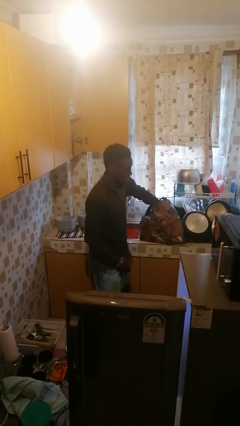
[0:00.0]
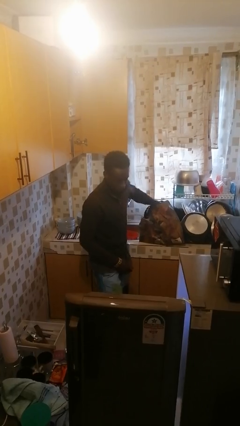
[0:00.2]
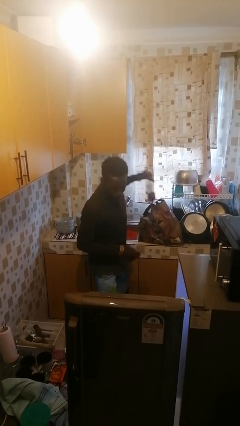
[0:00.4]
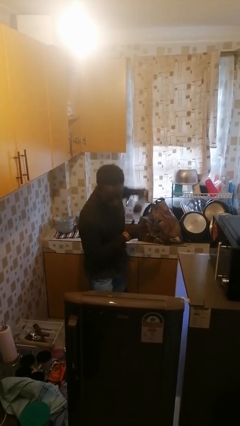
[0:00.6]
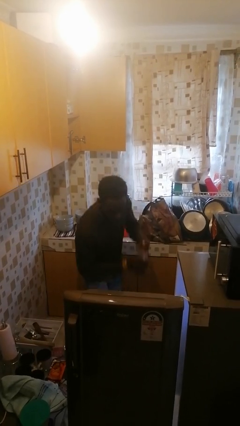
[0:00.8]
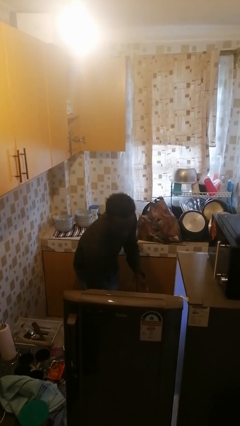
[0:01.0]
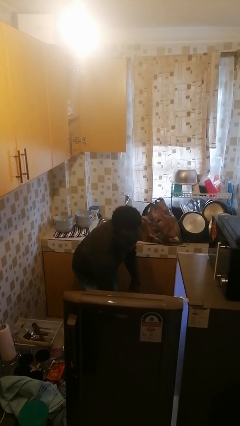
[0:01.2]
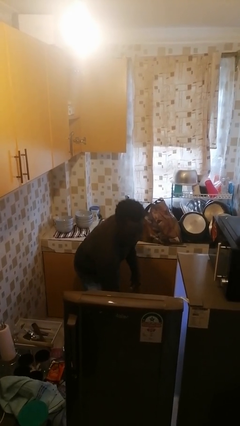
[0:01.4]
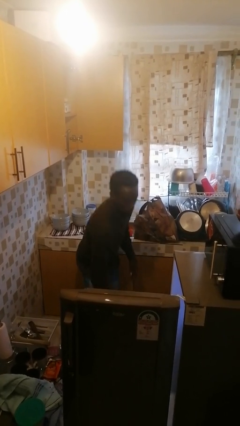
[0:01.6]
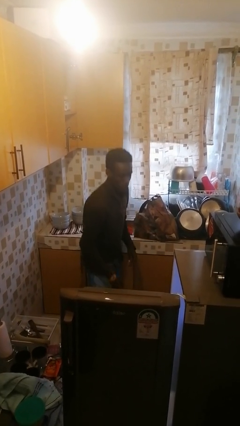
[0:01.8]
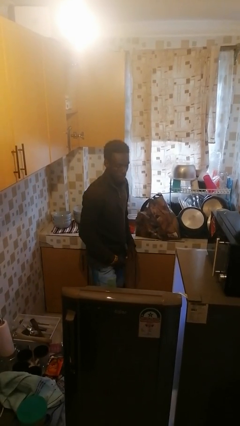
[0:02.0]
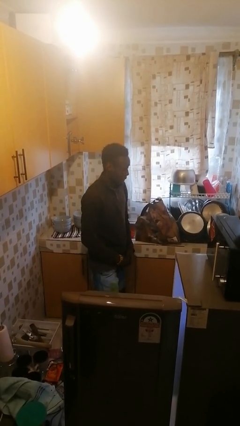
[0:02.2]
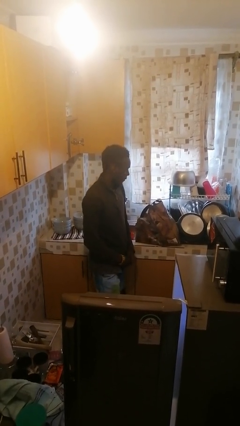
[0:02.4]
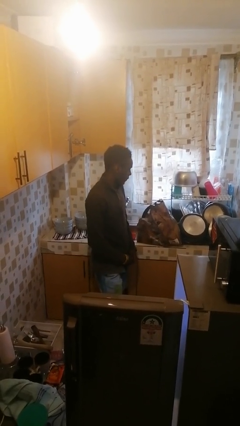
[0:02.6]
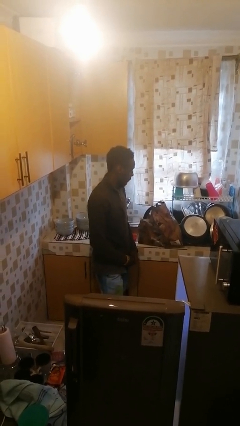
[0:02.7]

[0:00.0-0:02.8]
person loads groceries into refrigerator

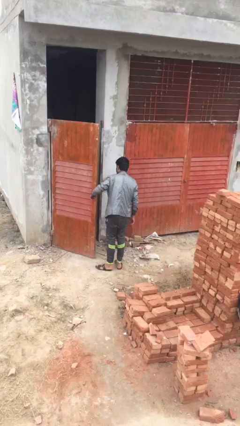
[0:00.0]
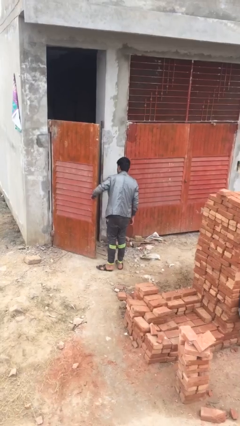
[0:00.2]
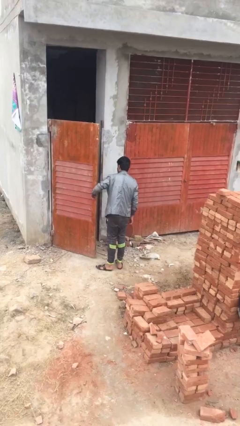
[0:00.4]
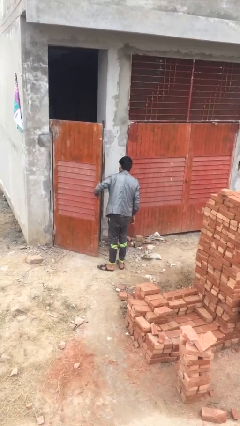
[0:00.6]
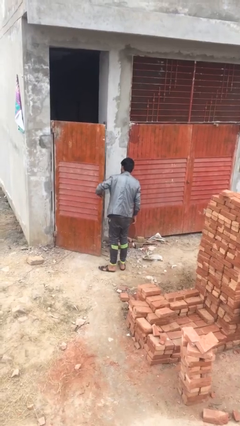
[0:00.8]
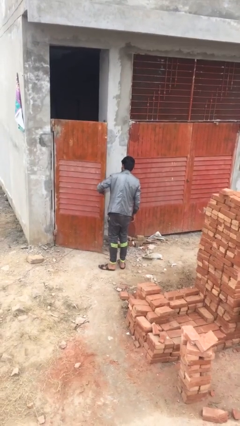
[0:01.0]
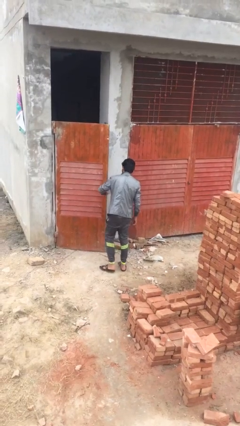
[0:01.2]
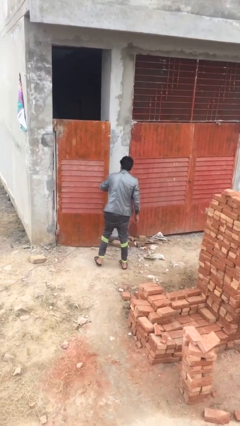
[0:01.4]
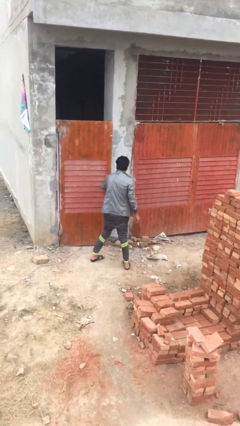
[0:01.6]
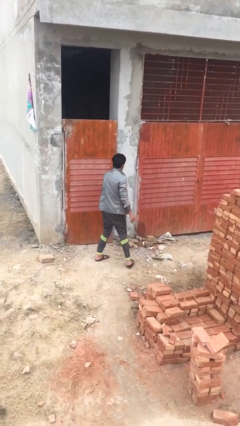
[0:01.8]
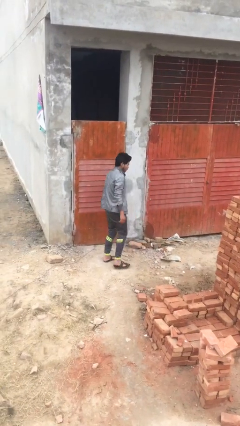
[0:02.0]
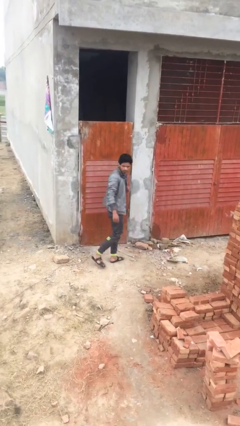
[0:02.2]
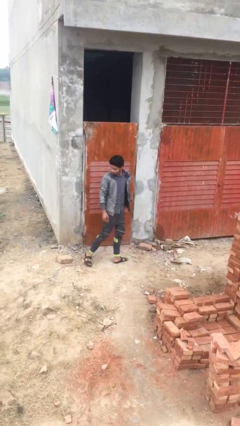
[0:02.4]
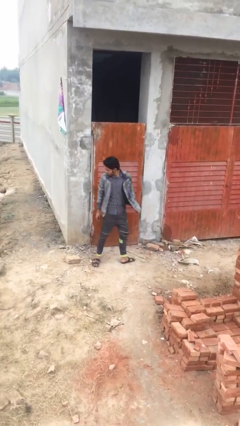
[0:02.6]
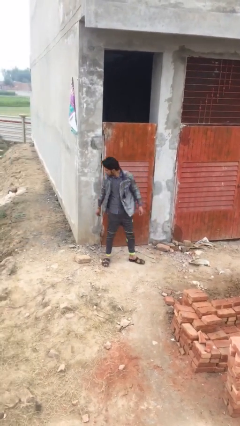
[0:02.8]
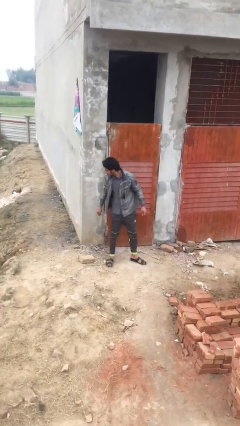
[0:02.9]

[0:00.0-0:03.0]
person closes facility door

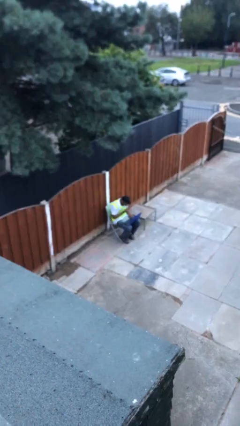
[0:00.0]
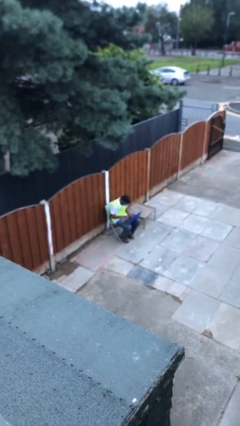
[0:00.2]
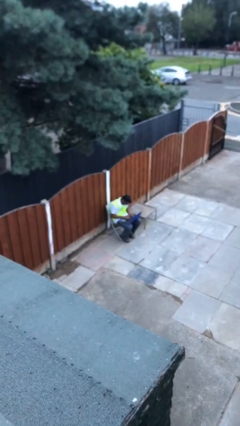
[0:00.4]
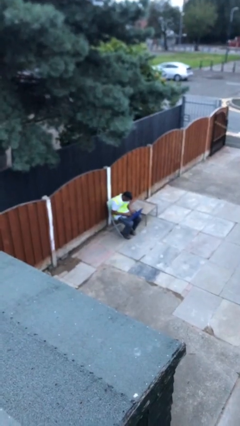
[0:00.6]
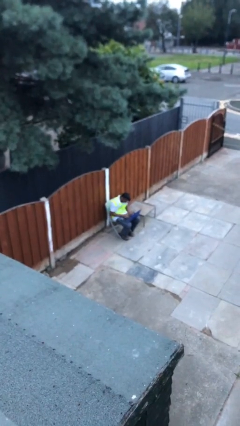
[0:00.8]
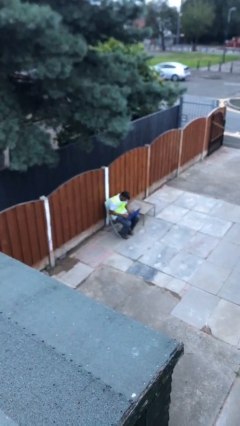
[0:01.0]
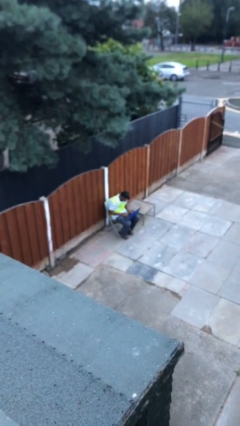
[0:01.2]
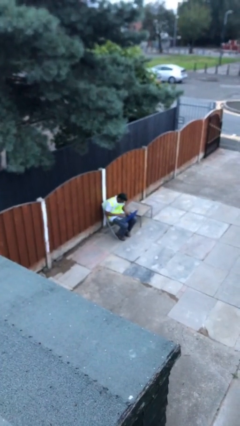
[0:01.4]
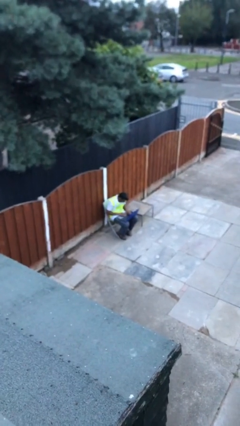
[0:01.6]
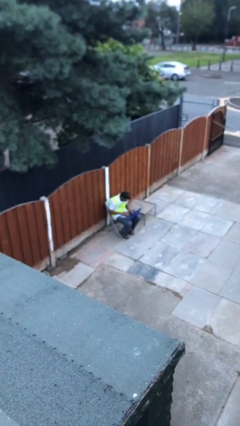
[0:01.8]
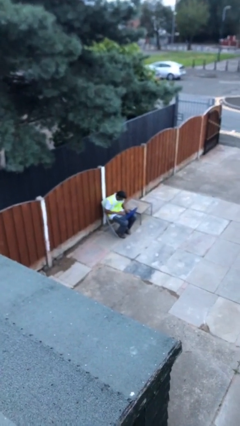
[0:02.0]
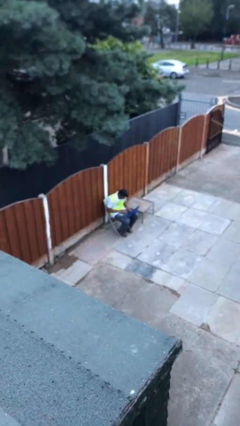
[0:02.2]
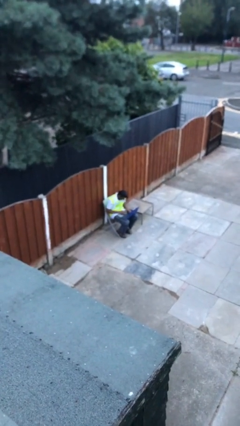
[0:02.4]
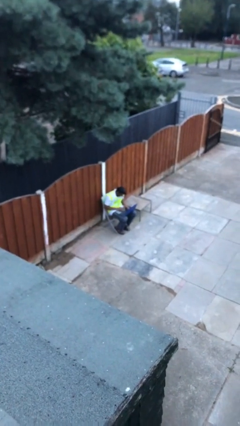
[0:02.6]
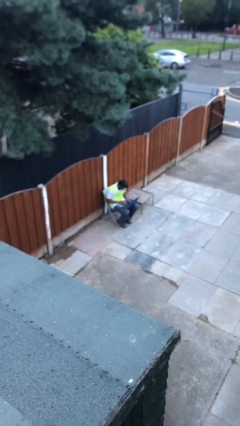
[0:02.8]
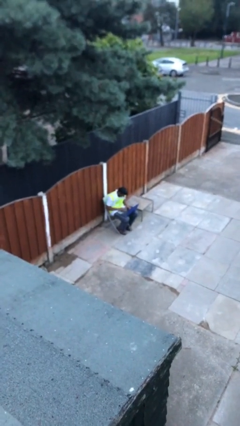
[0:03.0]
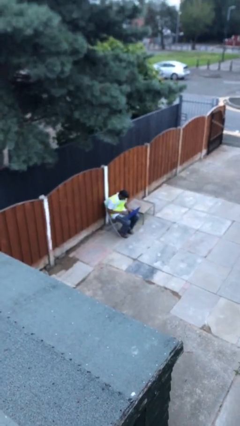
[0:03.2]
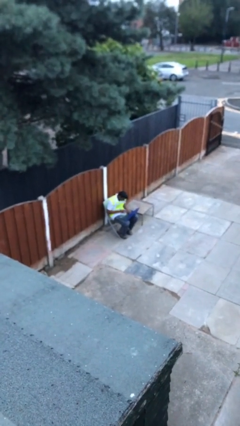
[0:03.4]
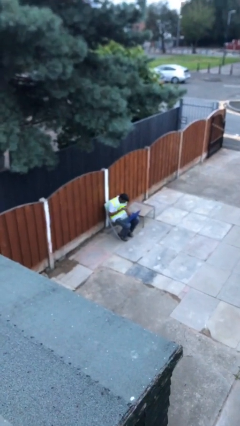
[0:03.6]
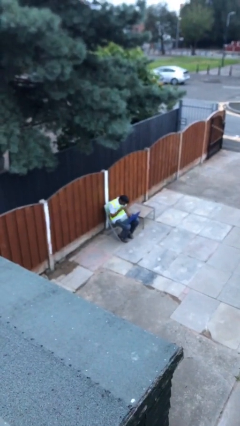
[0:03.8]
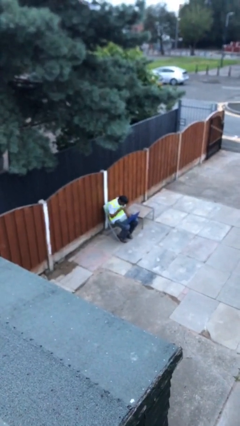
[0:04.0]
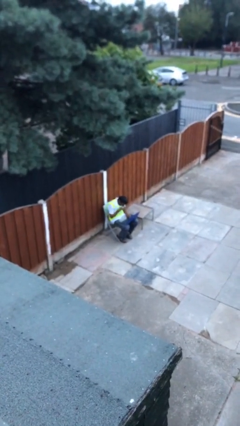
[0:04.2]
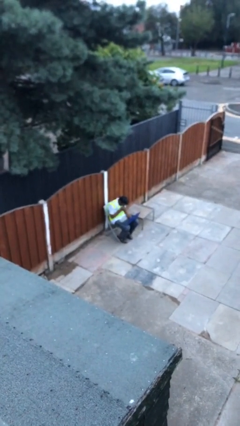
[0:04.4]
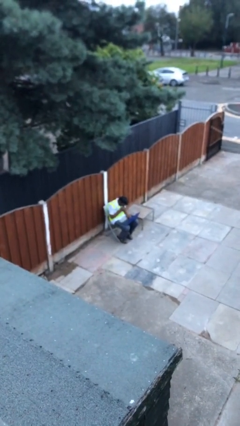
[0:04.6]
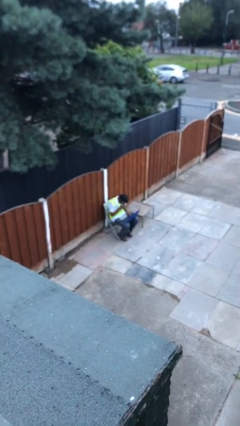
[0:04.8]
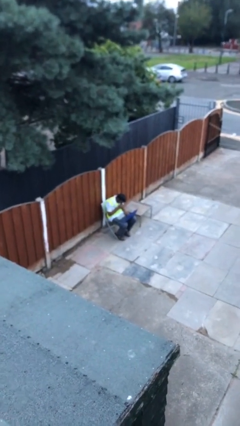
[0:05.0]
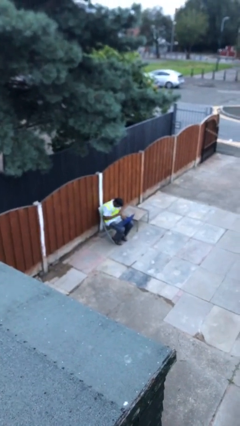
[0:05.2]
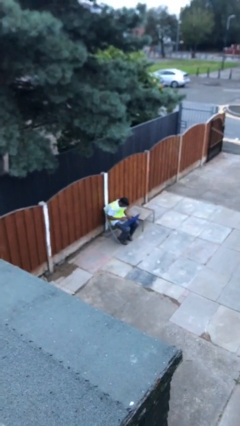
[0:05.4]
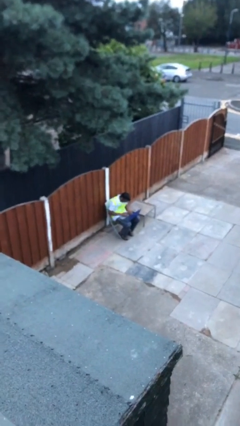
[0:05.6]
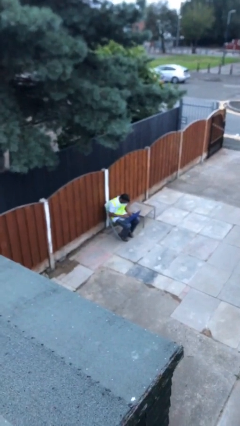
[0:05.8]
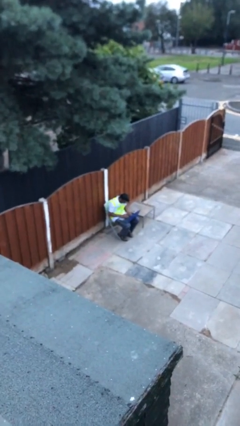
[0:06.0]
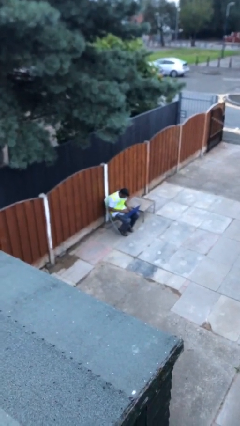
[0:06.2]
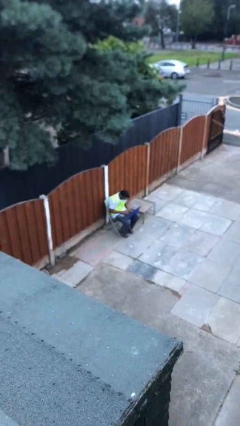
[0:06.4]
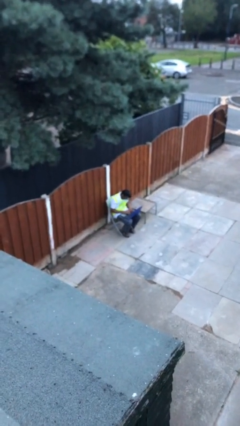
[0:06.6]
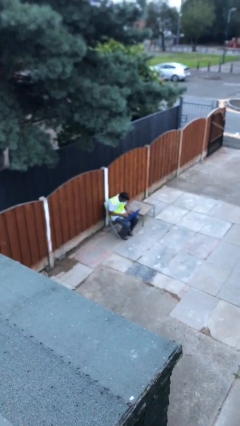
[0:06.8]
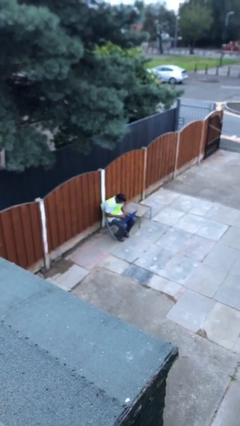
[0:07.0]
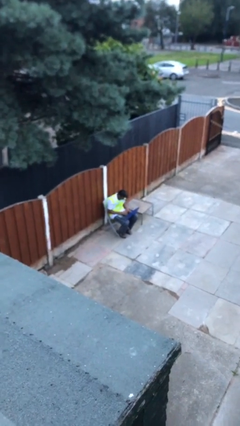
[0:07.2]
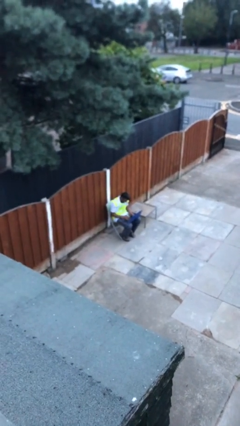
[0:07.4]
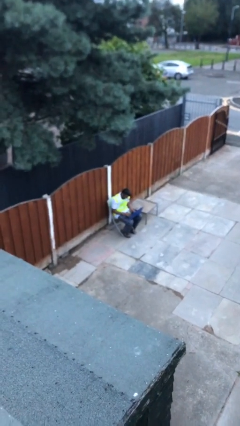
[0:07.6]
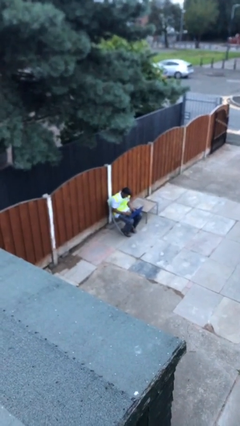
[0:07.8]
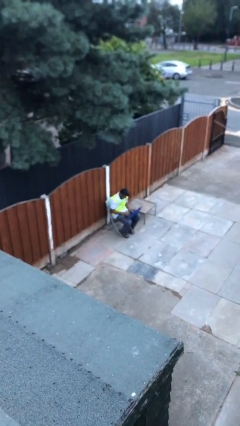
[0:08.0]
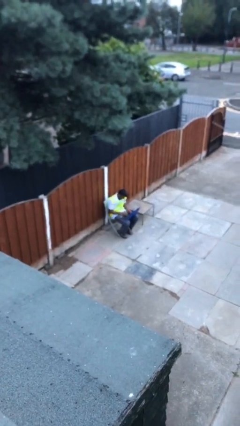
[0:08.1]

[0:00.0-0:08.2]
person interacts with laptop

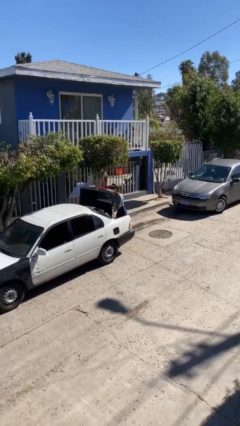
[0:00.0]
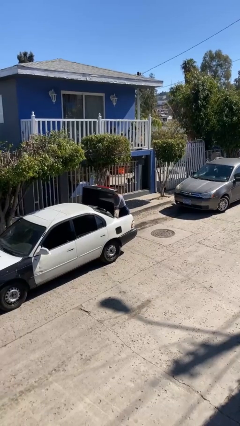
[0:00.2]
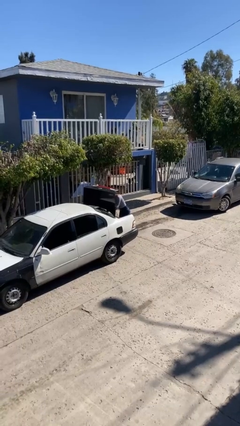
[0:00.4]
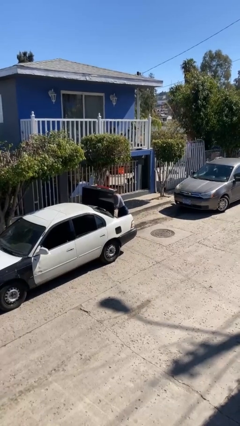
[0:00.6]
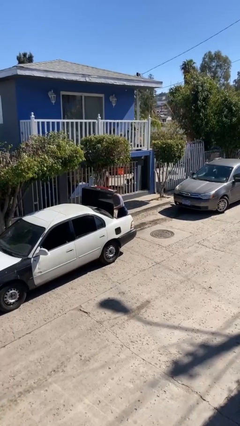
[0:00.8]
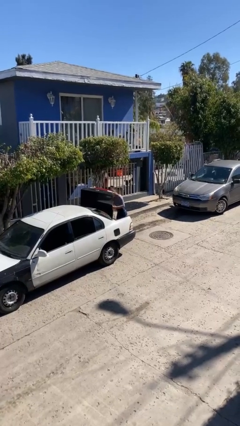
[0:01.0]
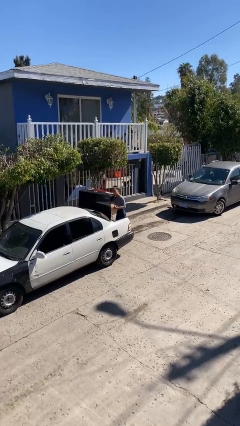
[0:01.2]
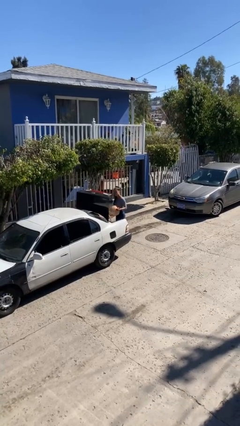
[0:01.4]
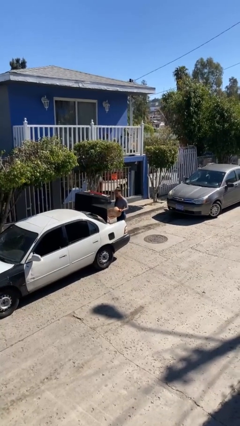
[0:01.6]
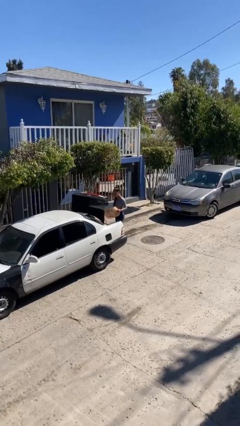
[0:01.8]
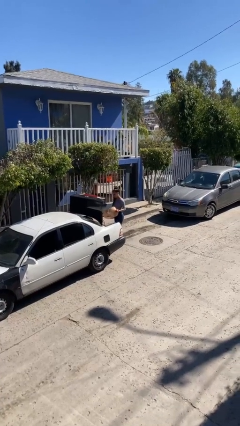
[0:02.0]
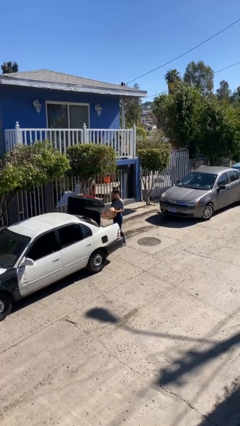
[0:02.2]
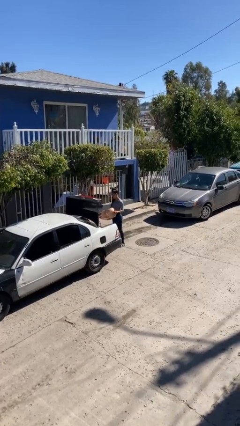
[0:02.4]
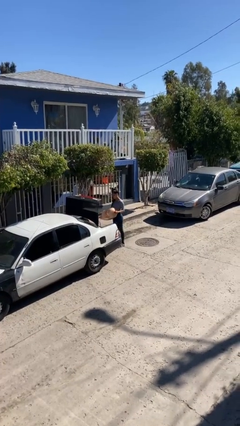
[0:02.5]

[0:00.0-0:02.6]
person unloads car

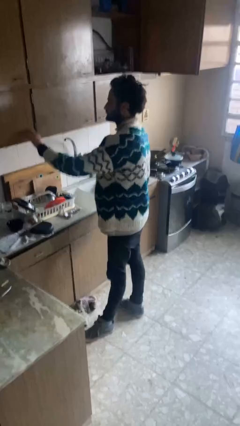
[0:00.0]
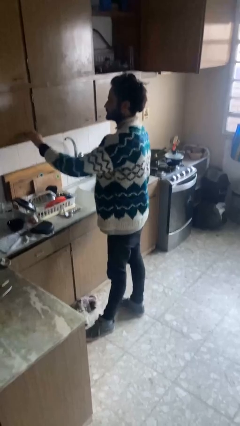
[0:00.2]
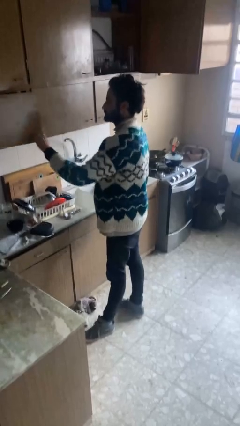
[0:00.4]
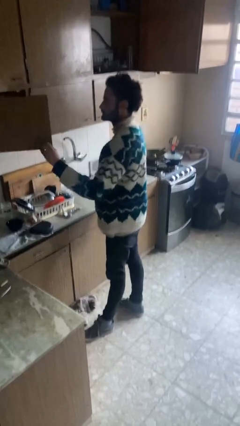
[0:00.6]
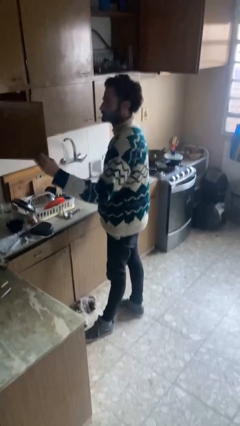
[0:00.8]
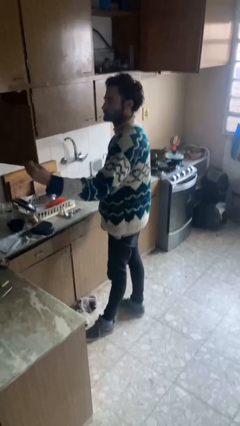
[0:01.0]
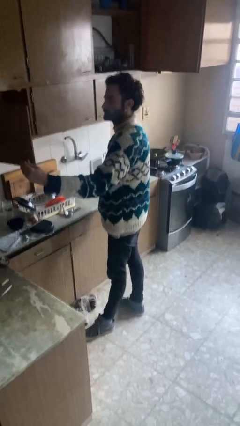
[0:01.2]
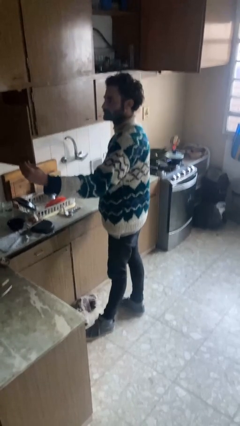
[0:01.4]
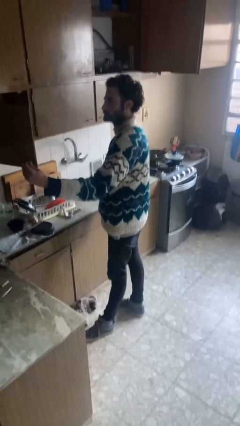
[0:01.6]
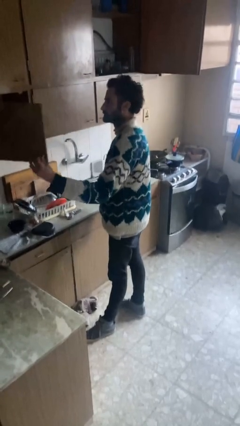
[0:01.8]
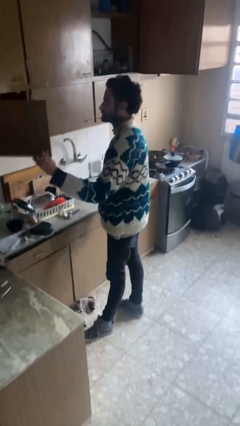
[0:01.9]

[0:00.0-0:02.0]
person opens cabinet
